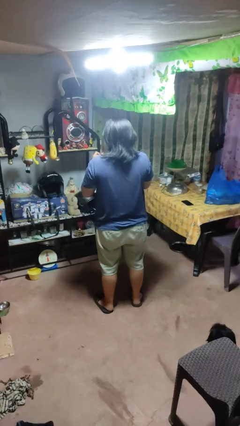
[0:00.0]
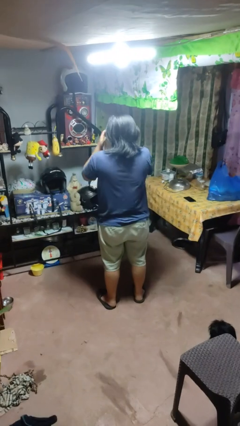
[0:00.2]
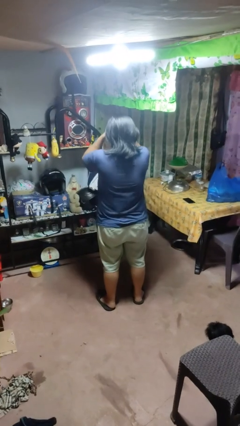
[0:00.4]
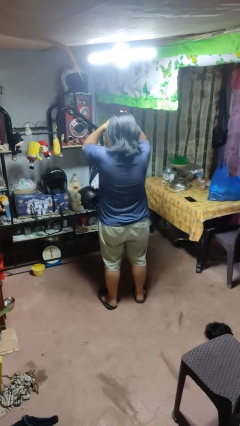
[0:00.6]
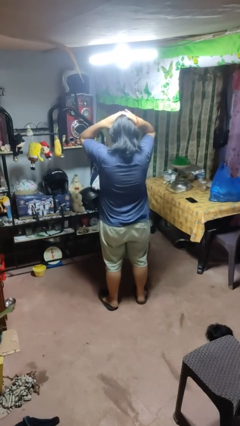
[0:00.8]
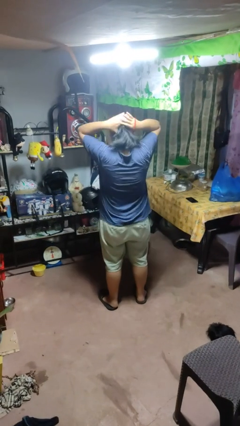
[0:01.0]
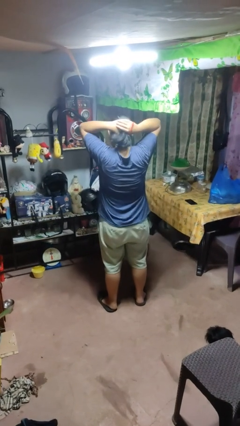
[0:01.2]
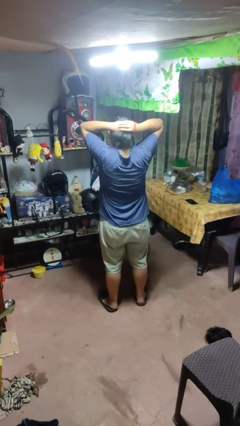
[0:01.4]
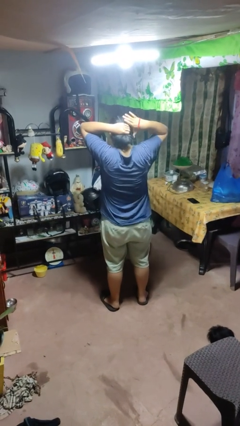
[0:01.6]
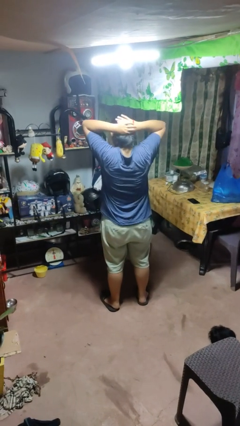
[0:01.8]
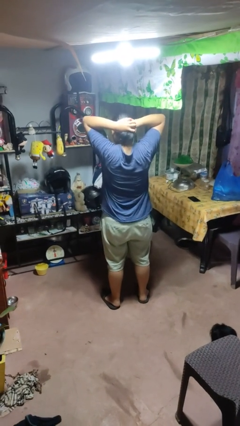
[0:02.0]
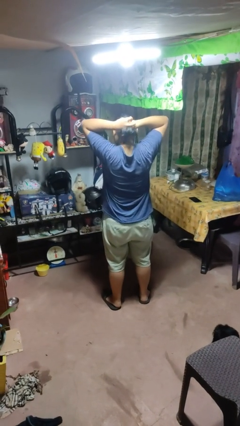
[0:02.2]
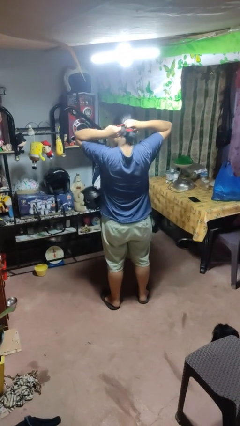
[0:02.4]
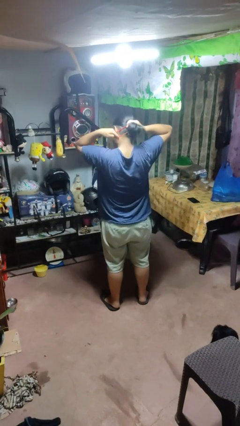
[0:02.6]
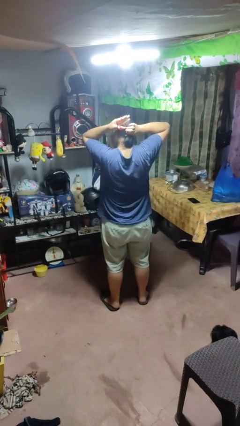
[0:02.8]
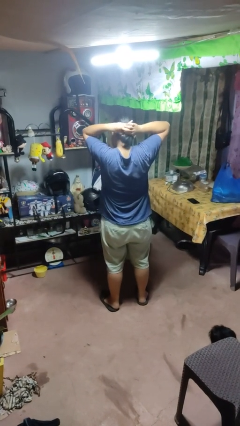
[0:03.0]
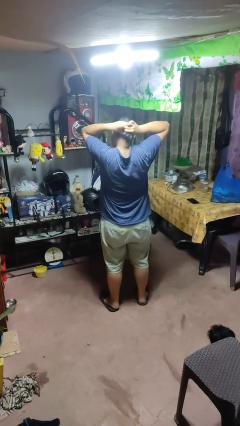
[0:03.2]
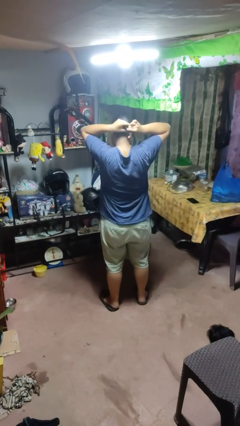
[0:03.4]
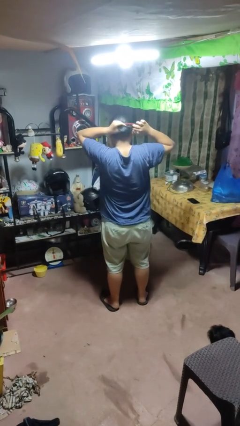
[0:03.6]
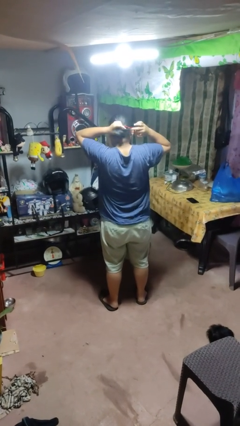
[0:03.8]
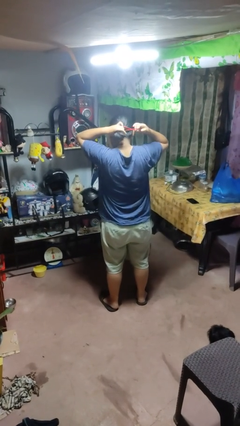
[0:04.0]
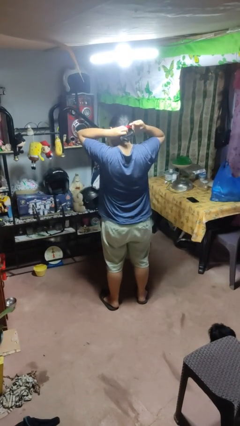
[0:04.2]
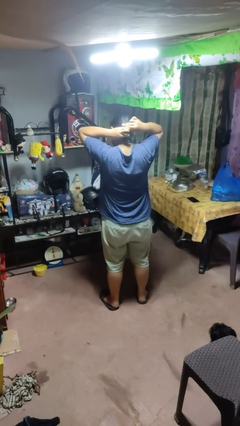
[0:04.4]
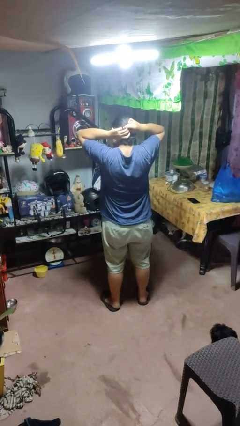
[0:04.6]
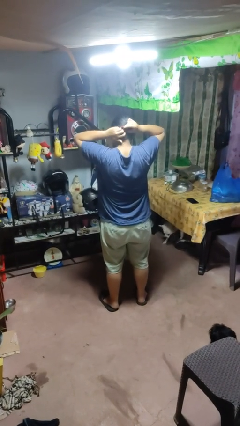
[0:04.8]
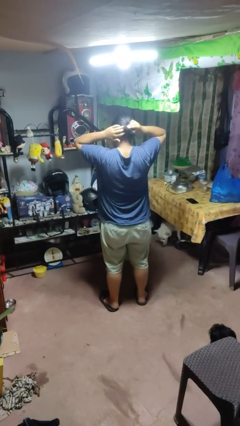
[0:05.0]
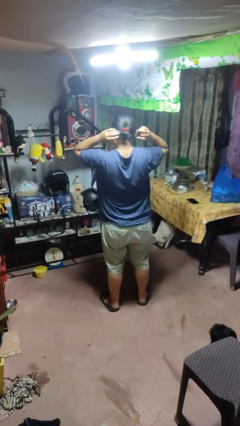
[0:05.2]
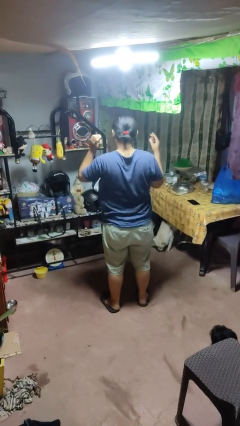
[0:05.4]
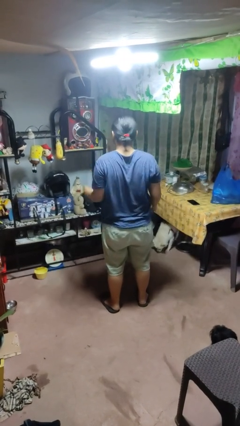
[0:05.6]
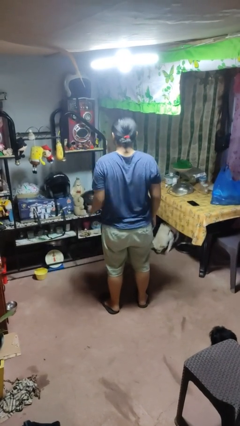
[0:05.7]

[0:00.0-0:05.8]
person puts hair in ponytail

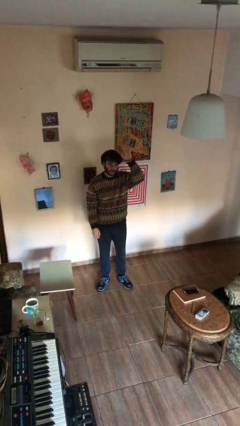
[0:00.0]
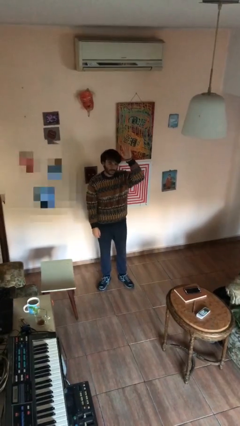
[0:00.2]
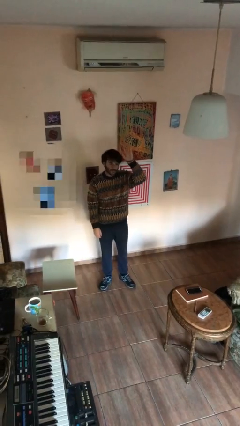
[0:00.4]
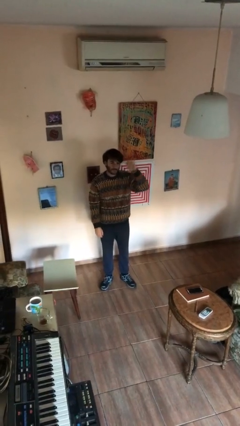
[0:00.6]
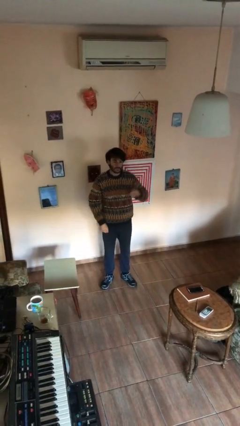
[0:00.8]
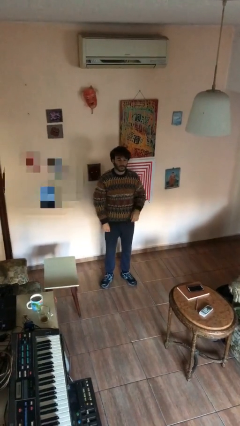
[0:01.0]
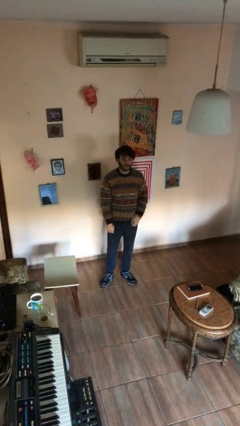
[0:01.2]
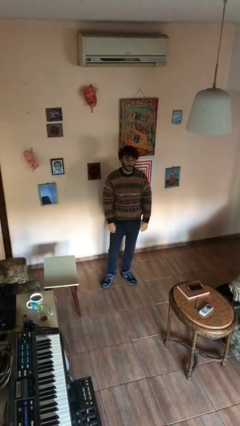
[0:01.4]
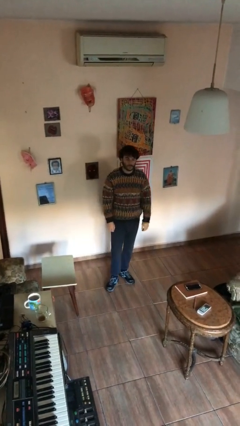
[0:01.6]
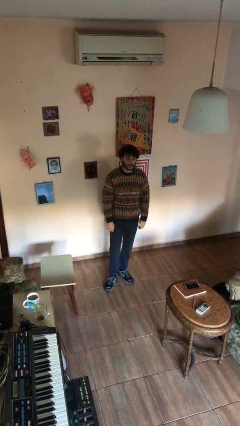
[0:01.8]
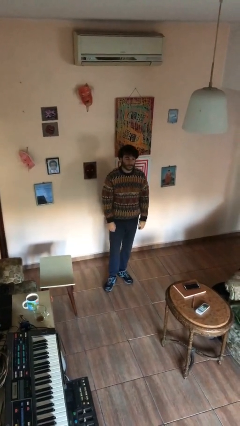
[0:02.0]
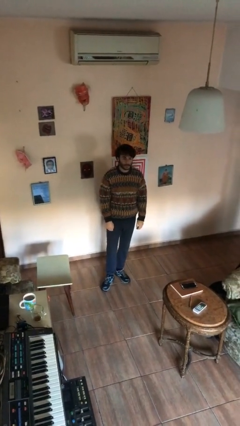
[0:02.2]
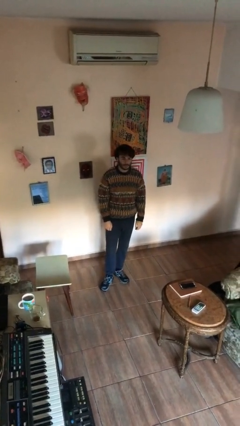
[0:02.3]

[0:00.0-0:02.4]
person gestures lower hand

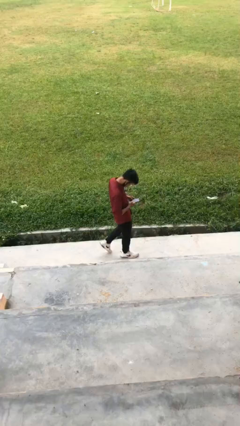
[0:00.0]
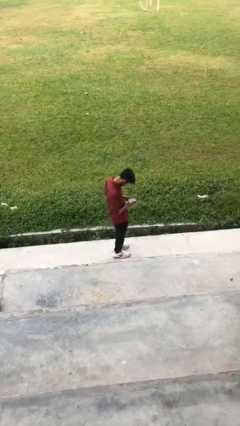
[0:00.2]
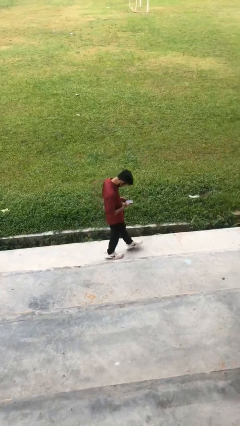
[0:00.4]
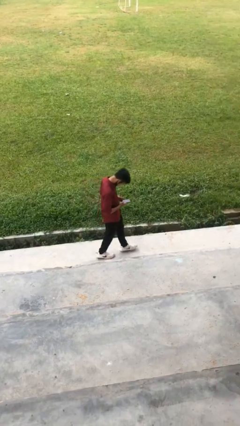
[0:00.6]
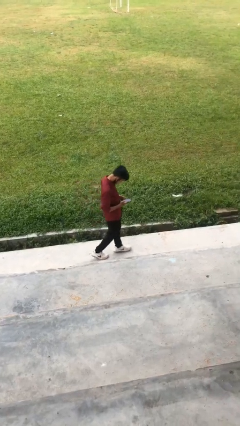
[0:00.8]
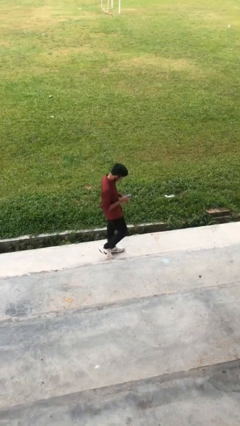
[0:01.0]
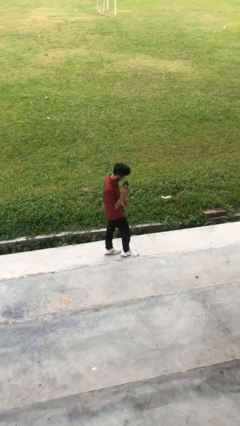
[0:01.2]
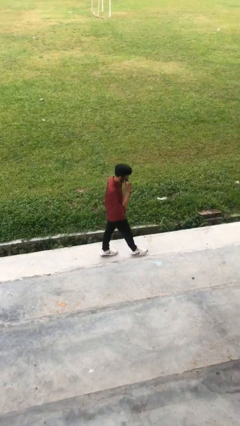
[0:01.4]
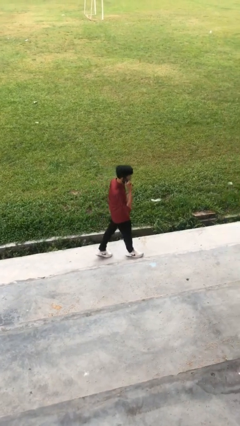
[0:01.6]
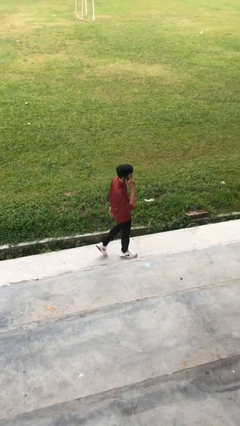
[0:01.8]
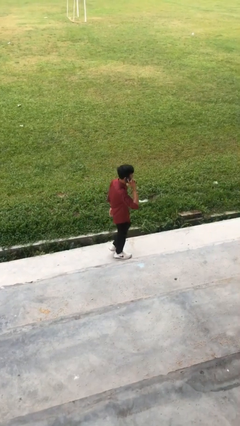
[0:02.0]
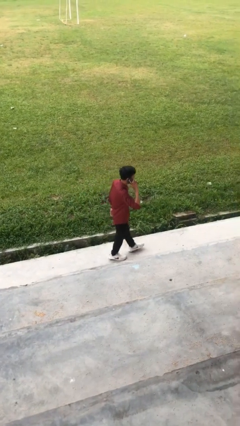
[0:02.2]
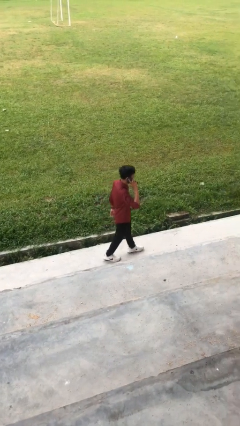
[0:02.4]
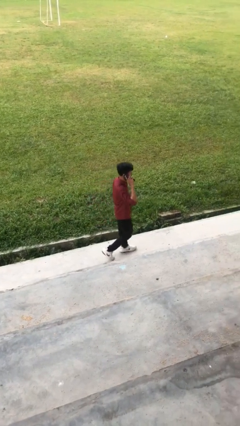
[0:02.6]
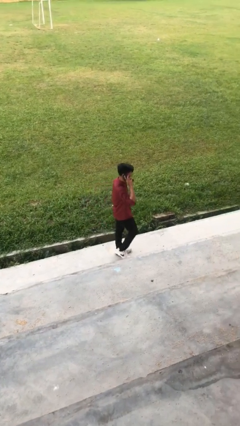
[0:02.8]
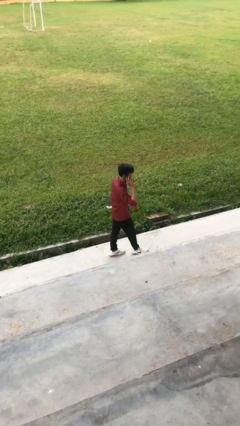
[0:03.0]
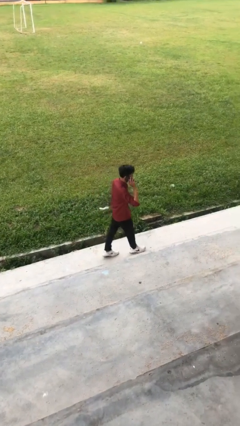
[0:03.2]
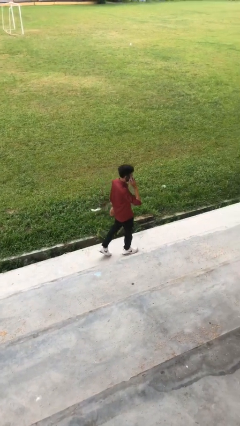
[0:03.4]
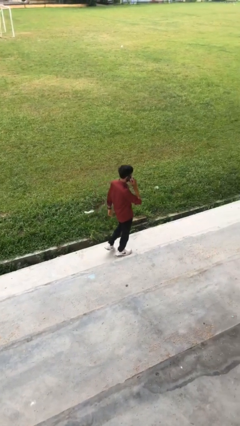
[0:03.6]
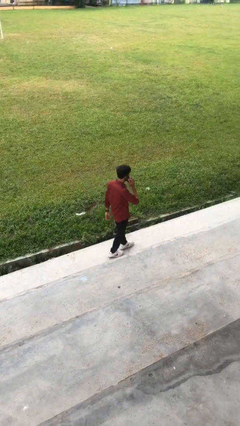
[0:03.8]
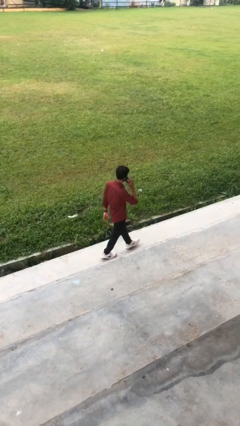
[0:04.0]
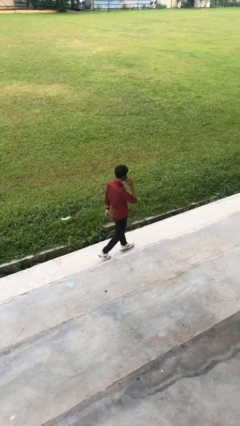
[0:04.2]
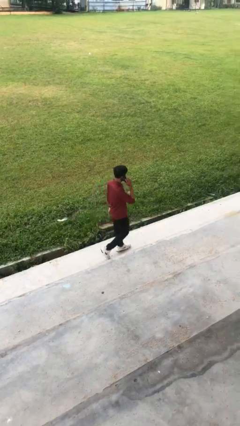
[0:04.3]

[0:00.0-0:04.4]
person talks on phone

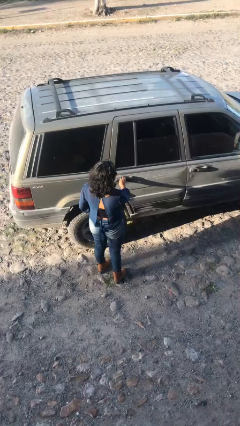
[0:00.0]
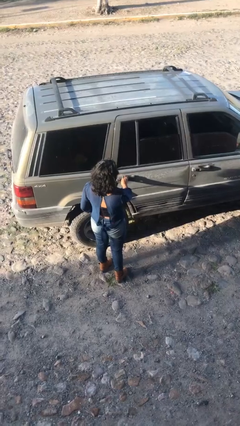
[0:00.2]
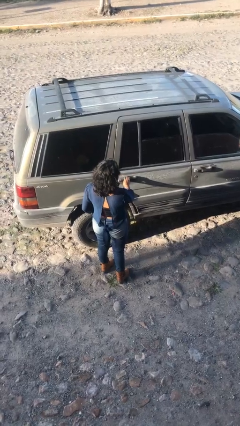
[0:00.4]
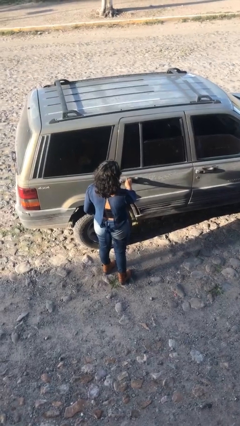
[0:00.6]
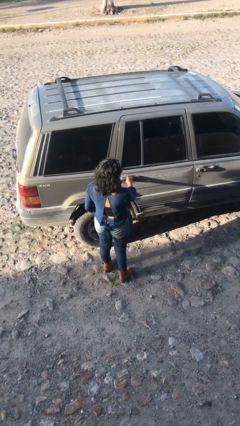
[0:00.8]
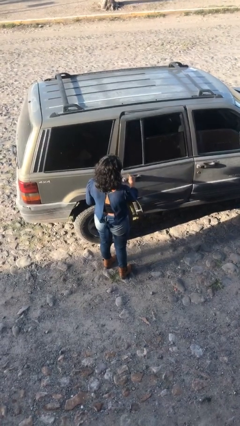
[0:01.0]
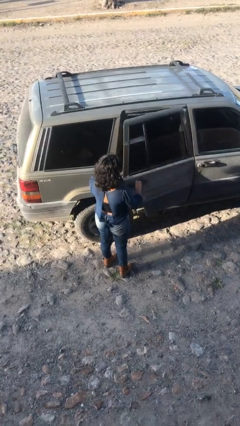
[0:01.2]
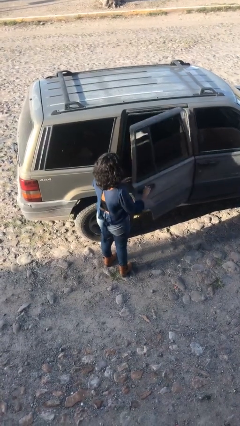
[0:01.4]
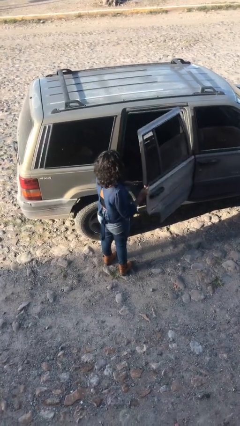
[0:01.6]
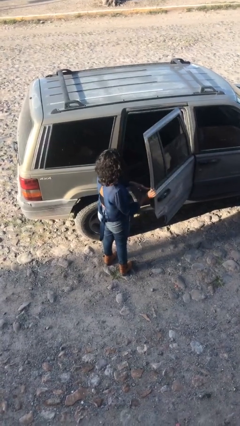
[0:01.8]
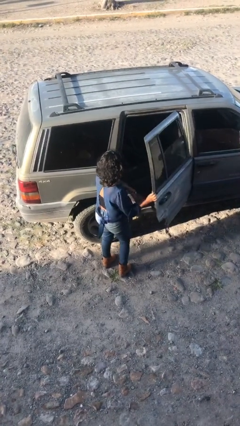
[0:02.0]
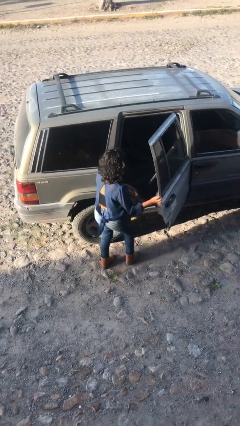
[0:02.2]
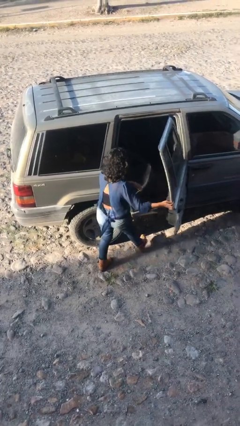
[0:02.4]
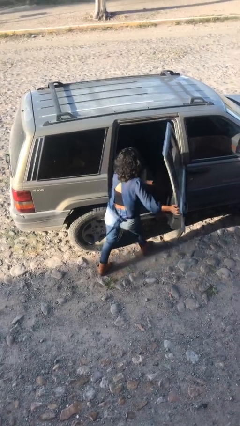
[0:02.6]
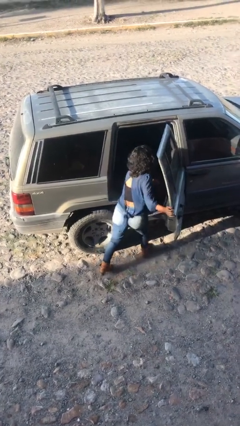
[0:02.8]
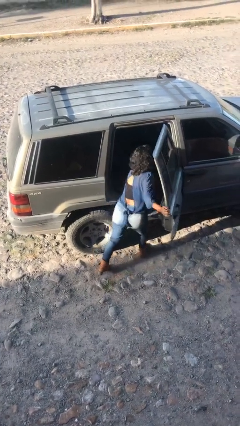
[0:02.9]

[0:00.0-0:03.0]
person opens car door

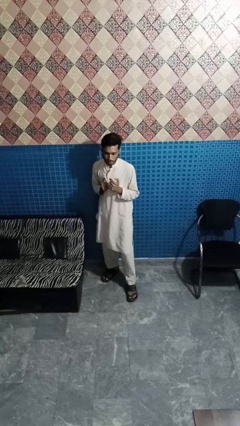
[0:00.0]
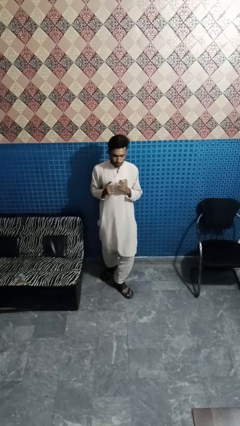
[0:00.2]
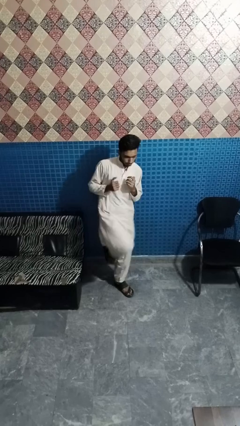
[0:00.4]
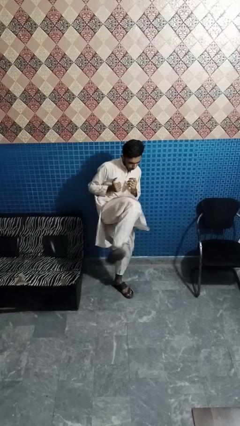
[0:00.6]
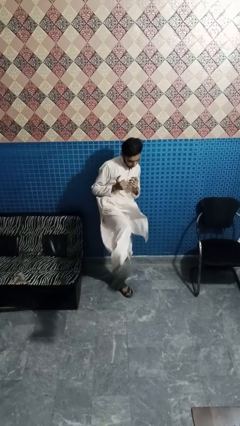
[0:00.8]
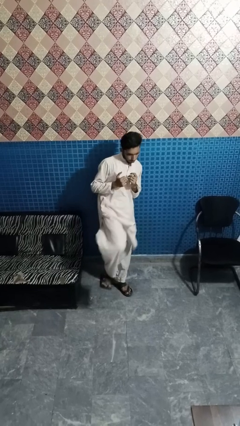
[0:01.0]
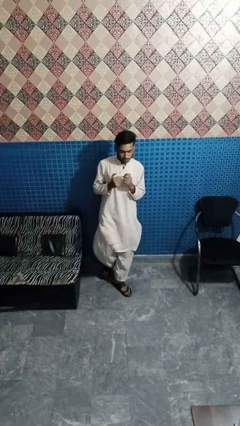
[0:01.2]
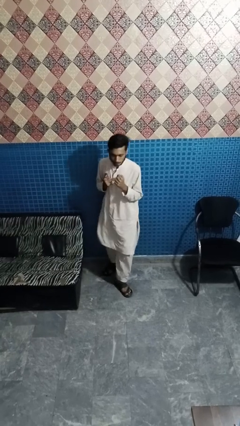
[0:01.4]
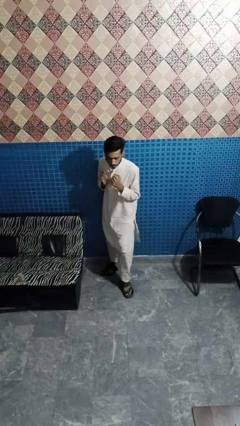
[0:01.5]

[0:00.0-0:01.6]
person karate kicks

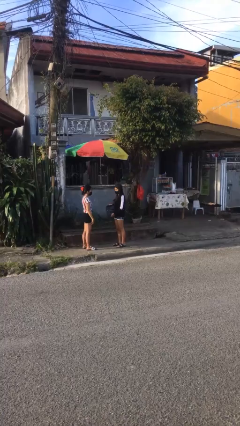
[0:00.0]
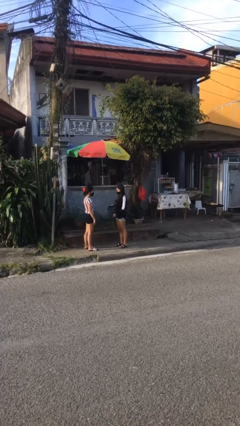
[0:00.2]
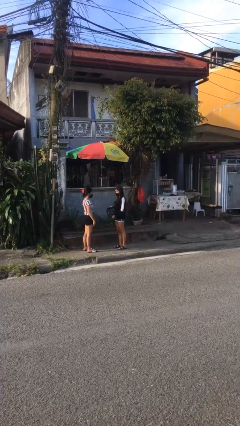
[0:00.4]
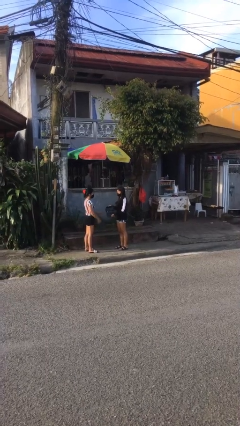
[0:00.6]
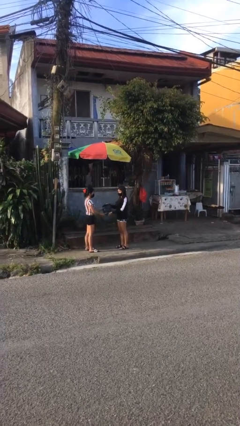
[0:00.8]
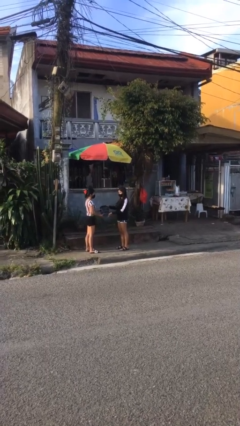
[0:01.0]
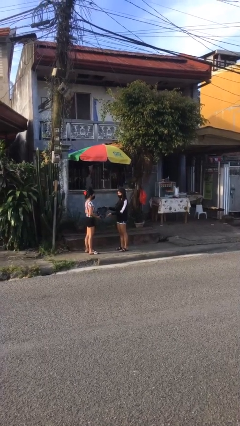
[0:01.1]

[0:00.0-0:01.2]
person transfers object to person
